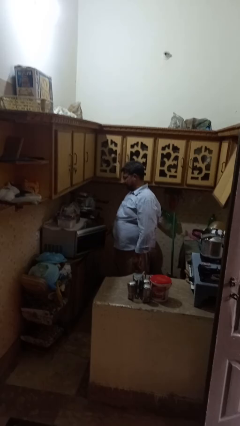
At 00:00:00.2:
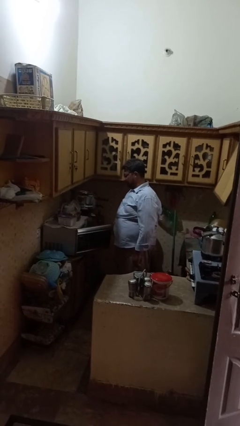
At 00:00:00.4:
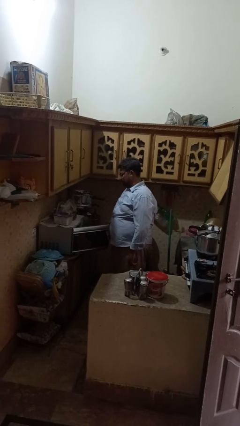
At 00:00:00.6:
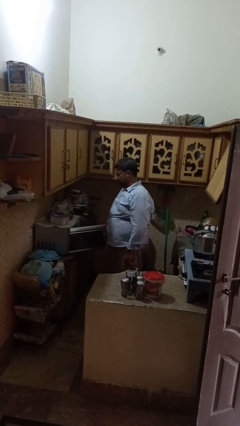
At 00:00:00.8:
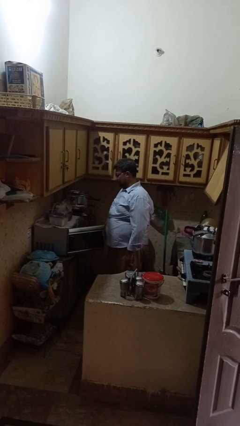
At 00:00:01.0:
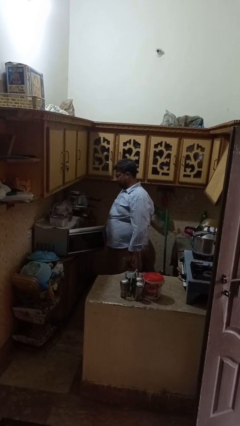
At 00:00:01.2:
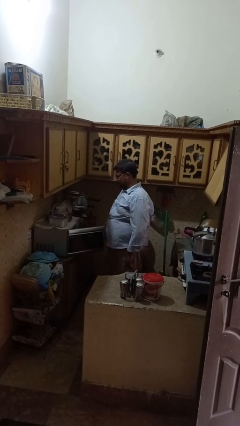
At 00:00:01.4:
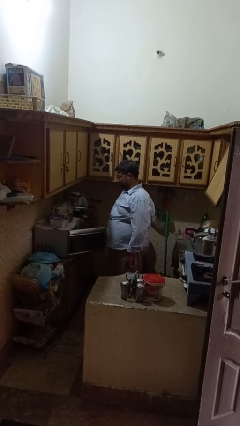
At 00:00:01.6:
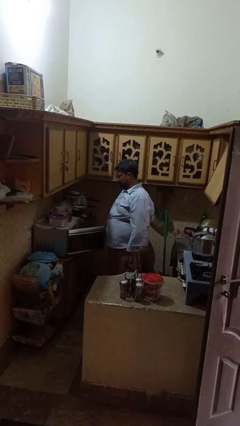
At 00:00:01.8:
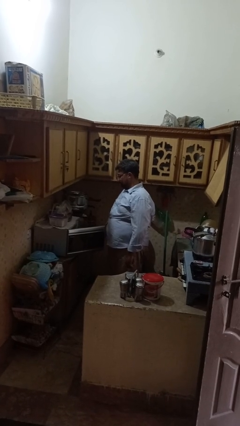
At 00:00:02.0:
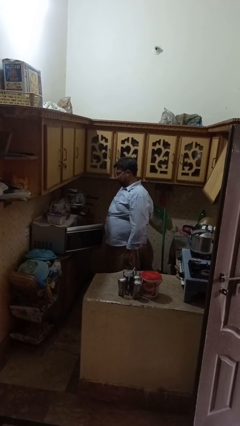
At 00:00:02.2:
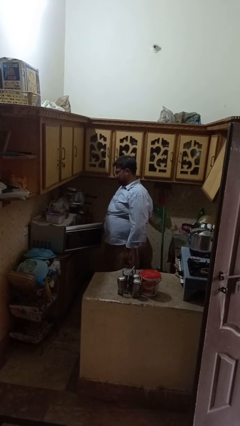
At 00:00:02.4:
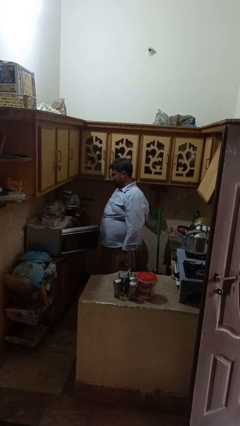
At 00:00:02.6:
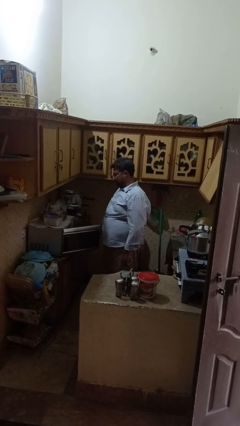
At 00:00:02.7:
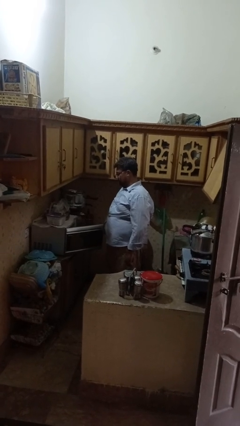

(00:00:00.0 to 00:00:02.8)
person opens microwave

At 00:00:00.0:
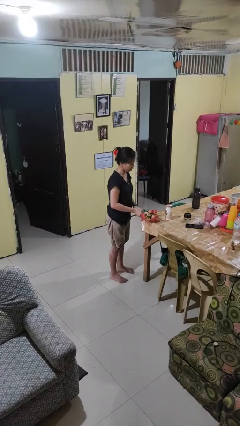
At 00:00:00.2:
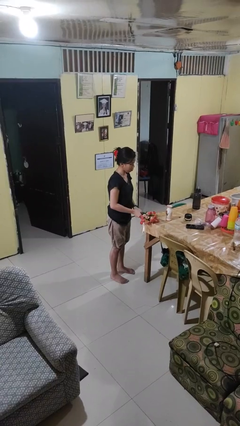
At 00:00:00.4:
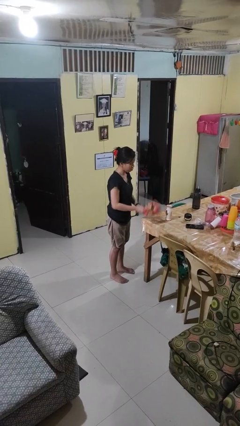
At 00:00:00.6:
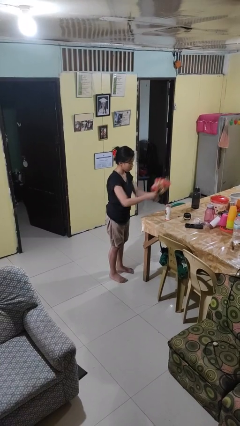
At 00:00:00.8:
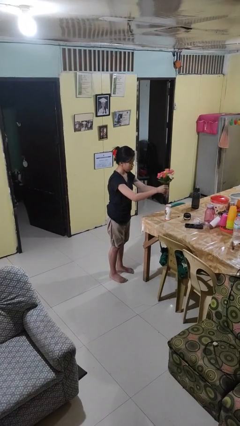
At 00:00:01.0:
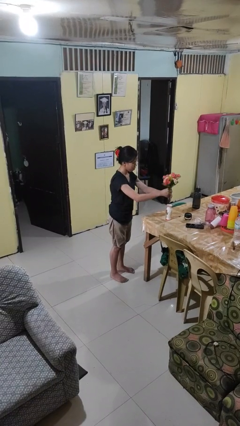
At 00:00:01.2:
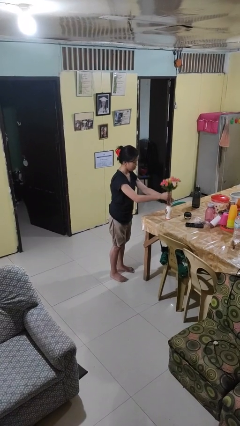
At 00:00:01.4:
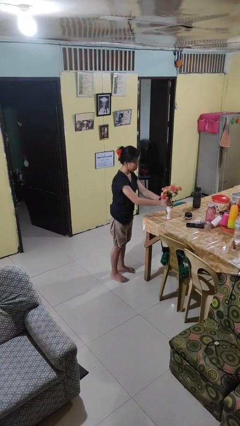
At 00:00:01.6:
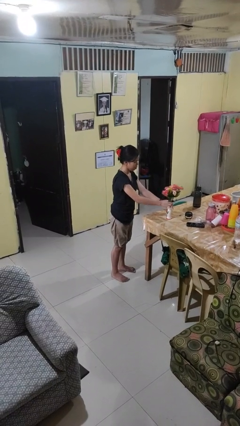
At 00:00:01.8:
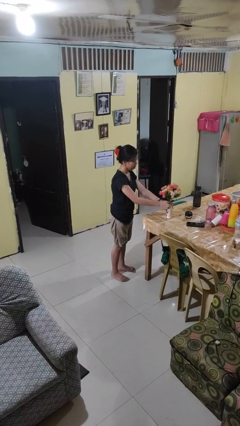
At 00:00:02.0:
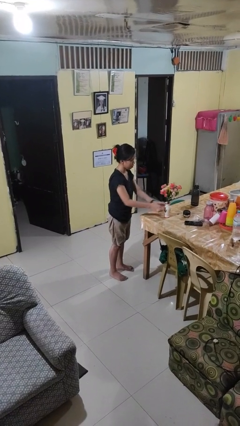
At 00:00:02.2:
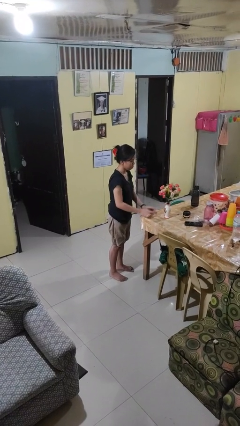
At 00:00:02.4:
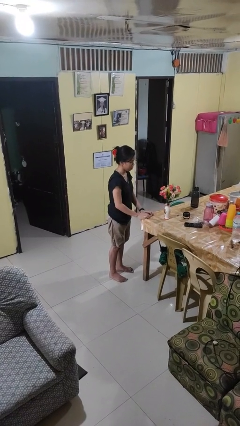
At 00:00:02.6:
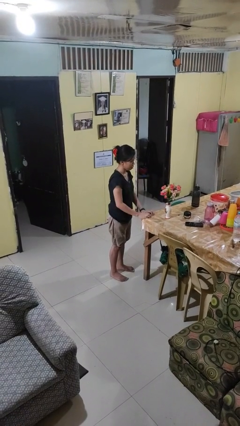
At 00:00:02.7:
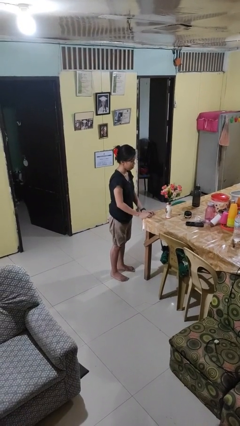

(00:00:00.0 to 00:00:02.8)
person arranges flowers in vase

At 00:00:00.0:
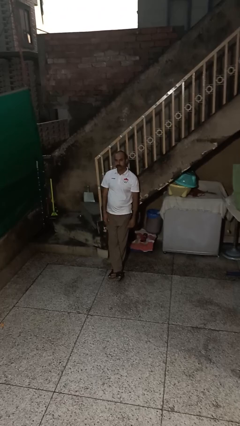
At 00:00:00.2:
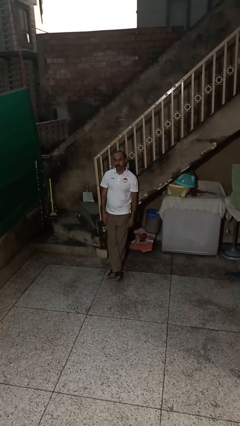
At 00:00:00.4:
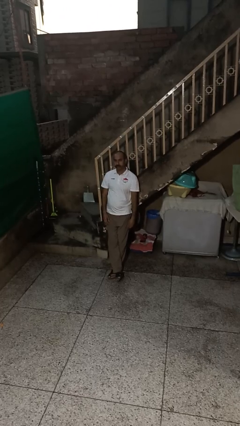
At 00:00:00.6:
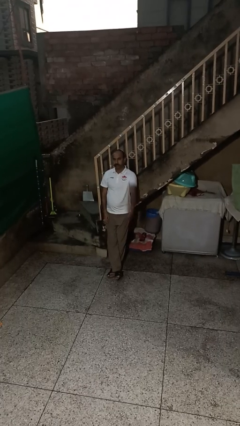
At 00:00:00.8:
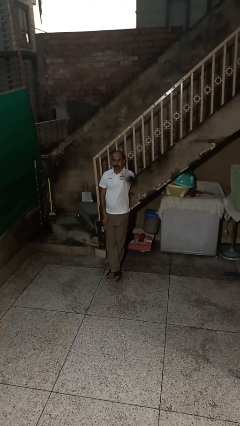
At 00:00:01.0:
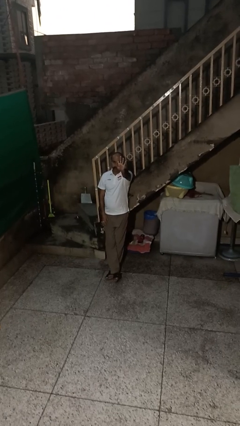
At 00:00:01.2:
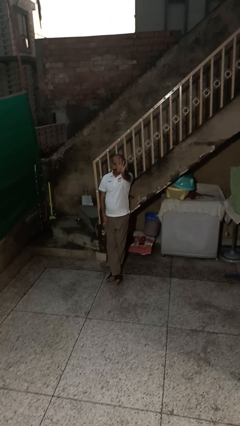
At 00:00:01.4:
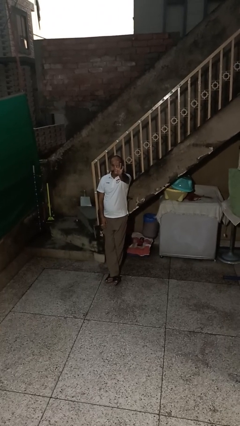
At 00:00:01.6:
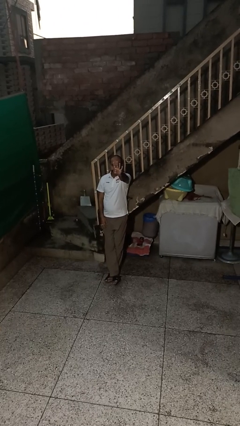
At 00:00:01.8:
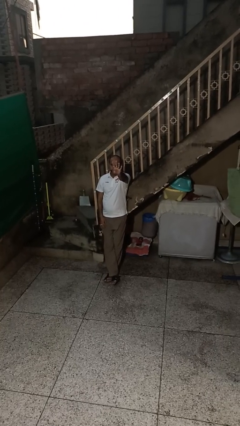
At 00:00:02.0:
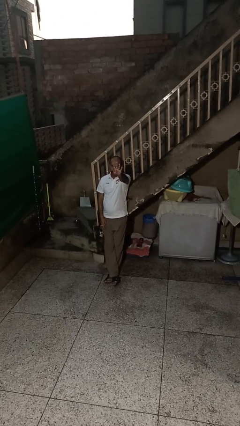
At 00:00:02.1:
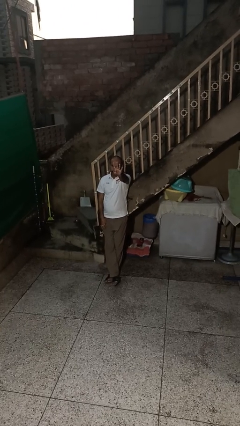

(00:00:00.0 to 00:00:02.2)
person gestures number four

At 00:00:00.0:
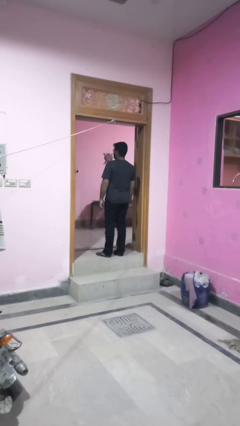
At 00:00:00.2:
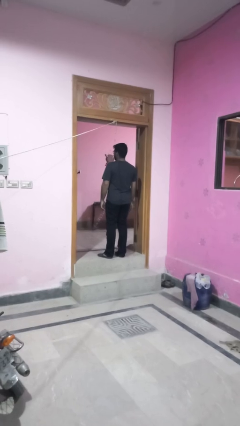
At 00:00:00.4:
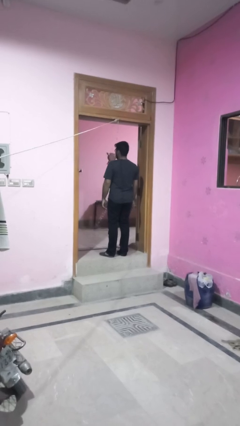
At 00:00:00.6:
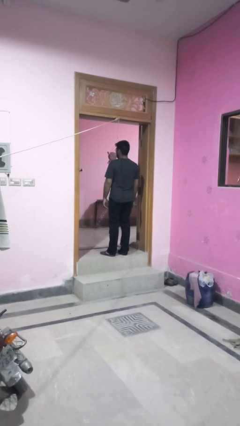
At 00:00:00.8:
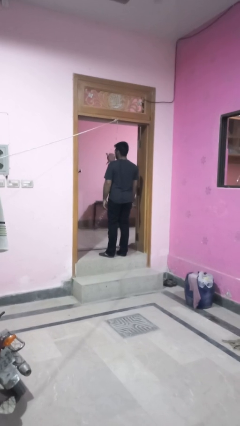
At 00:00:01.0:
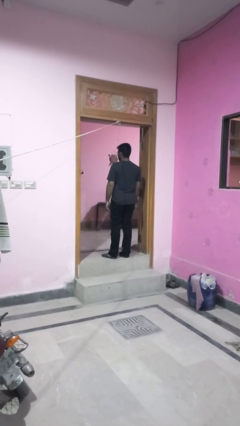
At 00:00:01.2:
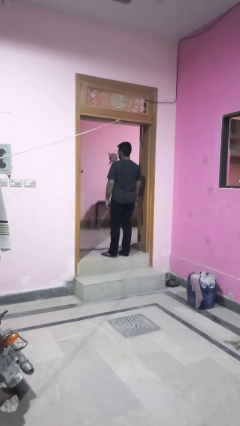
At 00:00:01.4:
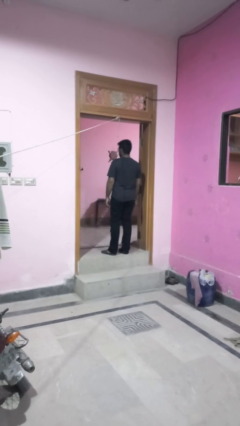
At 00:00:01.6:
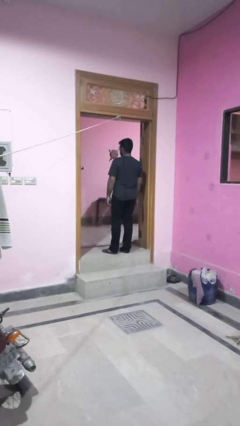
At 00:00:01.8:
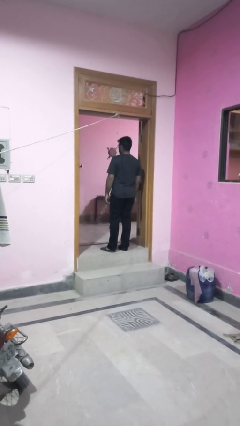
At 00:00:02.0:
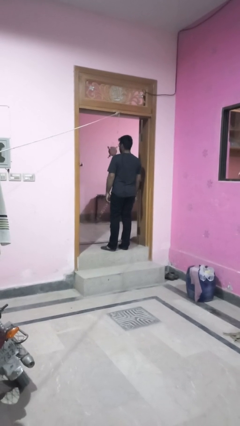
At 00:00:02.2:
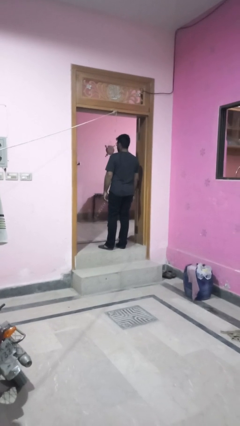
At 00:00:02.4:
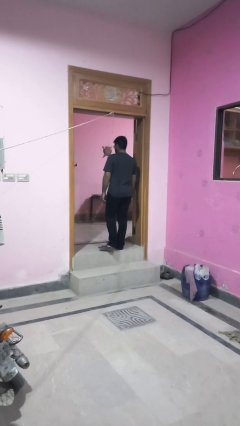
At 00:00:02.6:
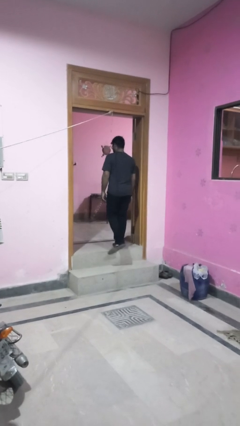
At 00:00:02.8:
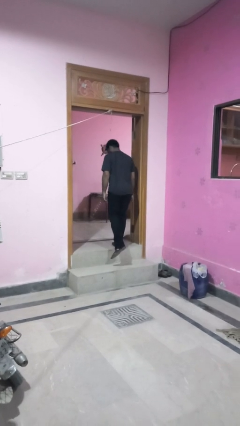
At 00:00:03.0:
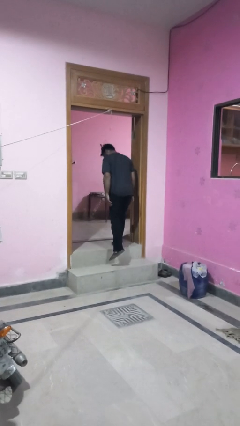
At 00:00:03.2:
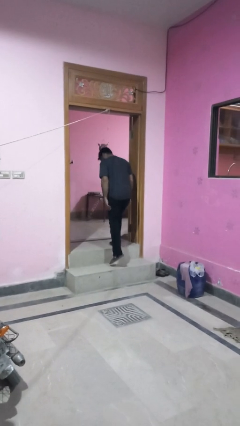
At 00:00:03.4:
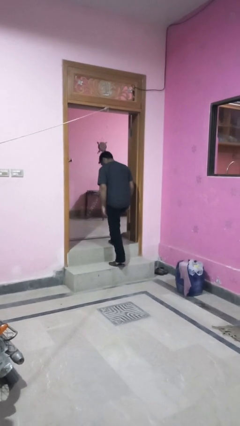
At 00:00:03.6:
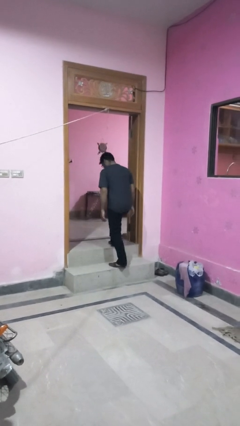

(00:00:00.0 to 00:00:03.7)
person takes off necklace

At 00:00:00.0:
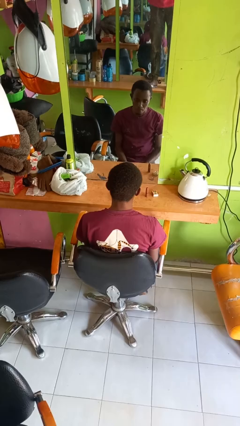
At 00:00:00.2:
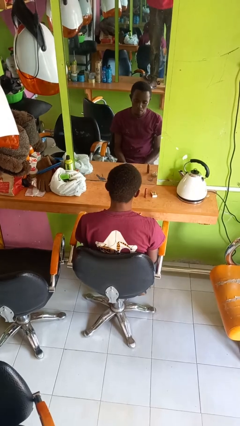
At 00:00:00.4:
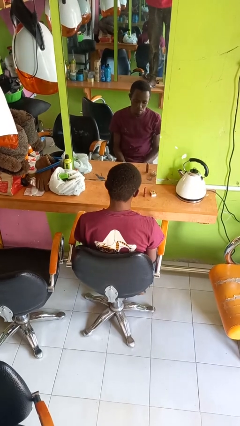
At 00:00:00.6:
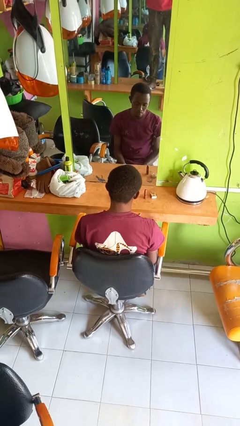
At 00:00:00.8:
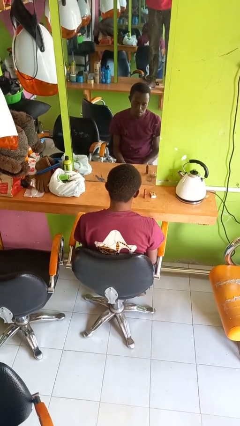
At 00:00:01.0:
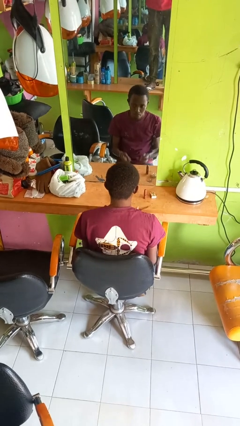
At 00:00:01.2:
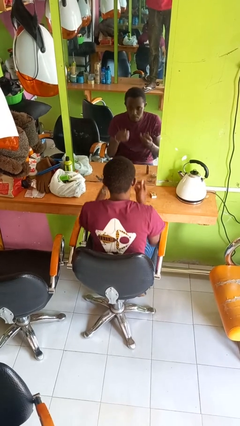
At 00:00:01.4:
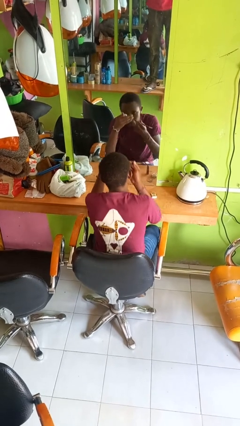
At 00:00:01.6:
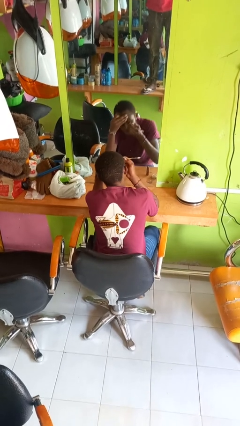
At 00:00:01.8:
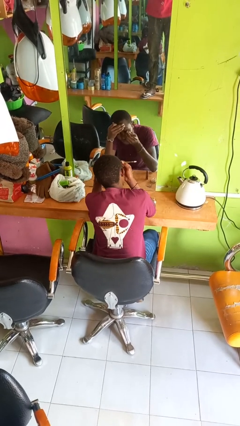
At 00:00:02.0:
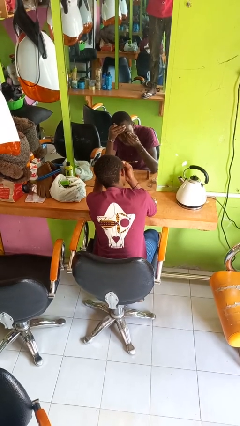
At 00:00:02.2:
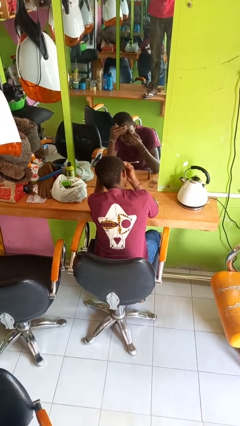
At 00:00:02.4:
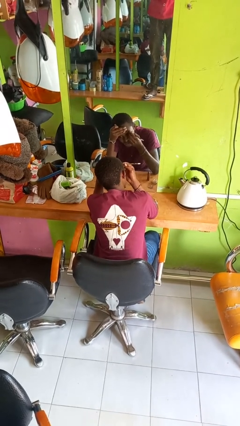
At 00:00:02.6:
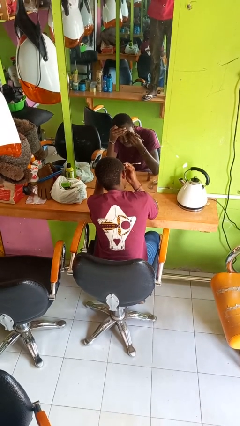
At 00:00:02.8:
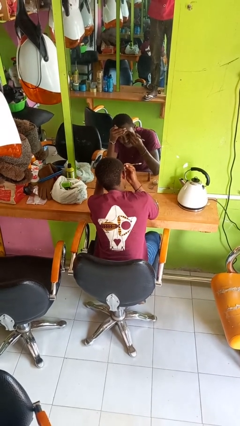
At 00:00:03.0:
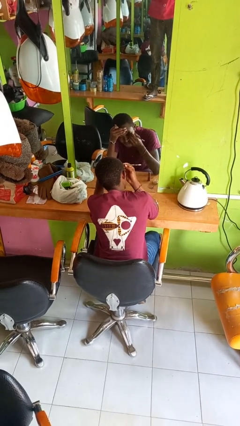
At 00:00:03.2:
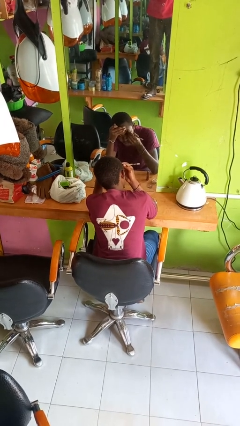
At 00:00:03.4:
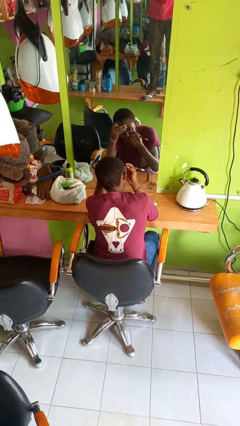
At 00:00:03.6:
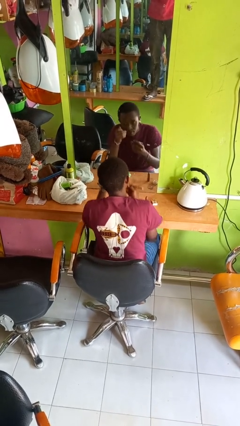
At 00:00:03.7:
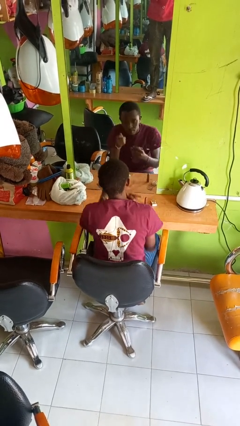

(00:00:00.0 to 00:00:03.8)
person applies eye makeup

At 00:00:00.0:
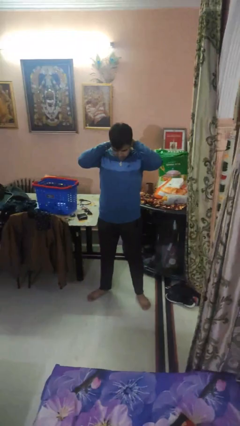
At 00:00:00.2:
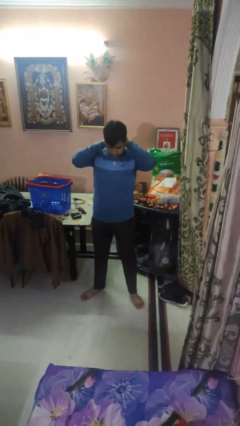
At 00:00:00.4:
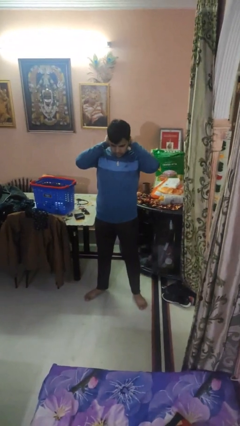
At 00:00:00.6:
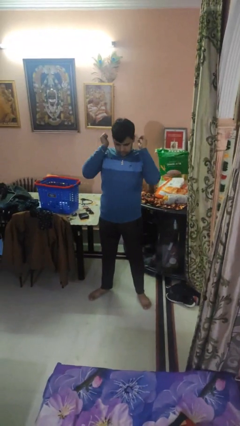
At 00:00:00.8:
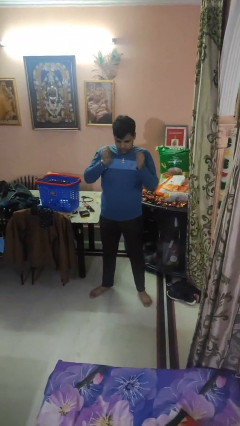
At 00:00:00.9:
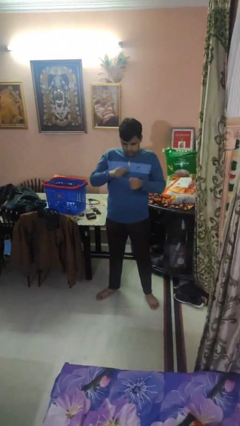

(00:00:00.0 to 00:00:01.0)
person puts on necklace

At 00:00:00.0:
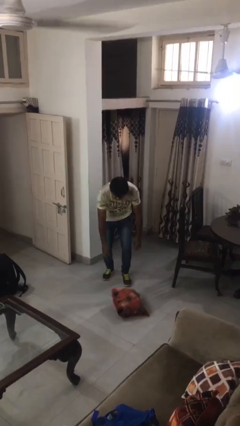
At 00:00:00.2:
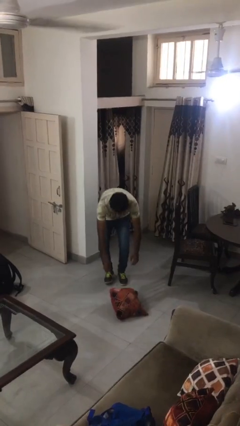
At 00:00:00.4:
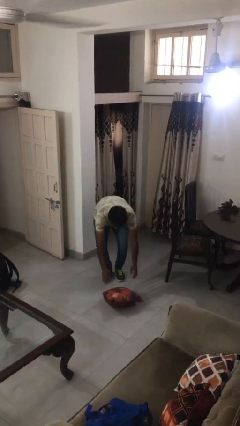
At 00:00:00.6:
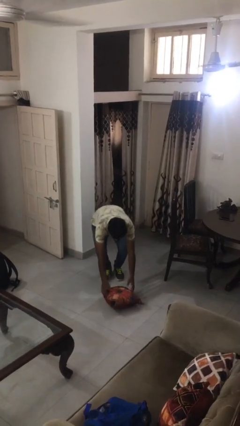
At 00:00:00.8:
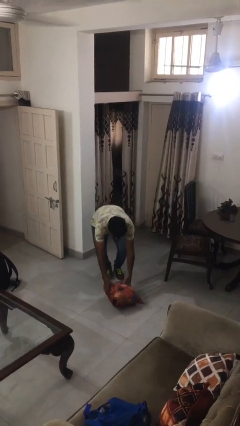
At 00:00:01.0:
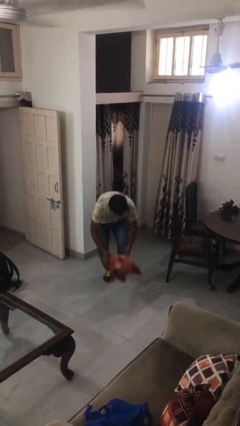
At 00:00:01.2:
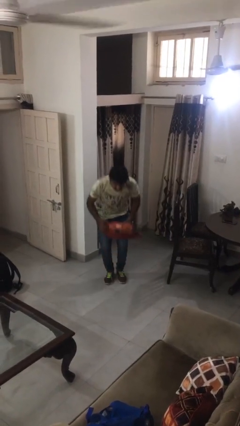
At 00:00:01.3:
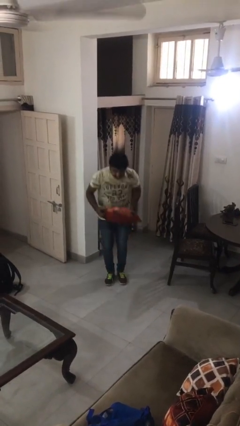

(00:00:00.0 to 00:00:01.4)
person picks up object from floor
